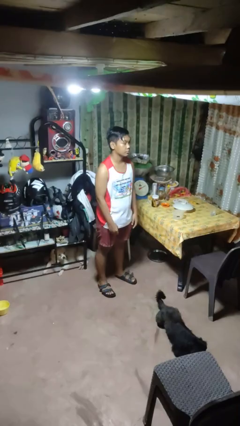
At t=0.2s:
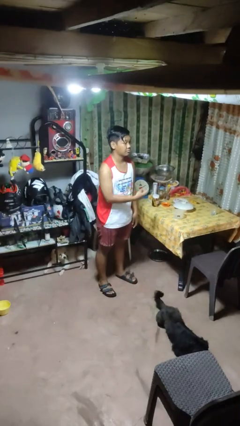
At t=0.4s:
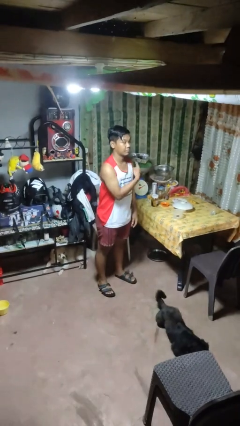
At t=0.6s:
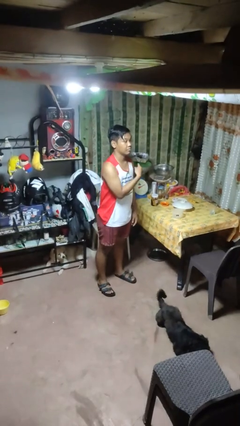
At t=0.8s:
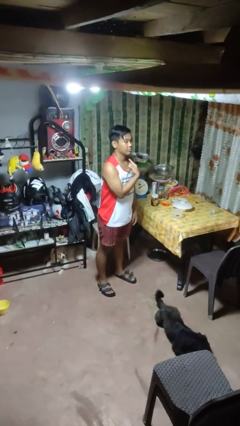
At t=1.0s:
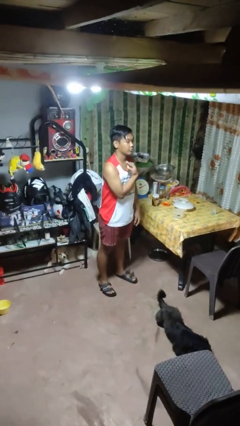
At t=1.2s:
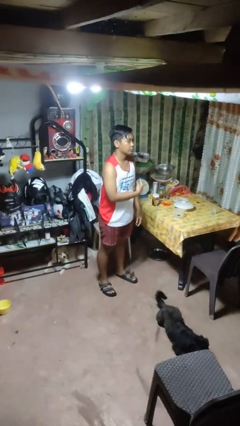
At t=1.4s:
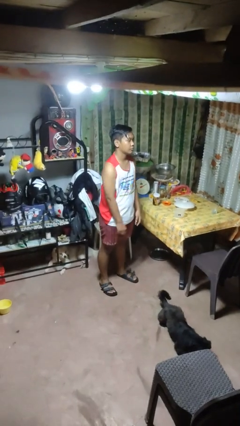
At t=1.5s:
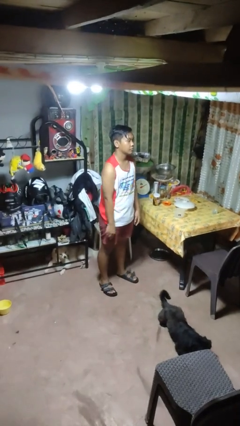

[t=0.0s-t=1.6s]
person gestures cut

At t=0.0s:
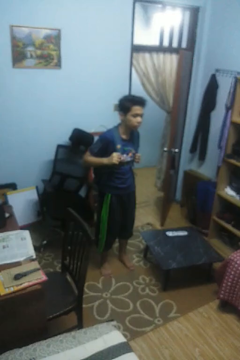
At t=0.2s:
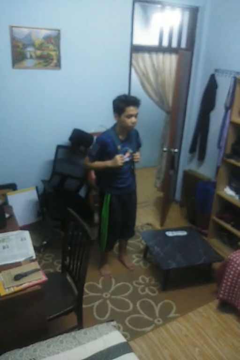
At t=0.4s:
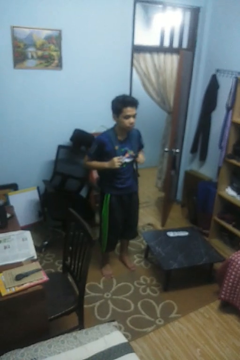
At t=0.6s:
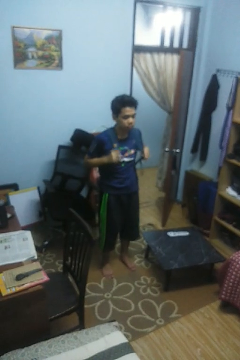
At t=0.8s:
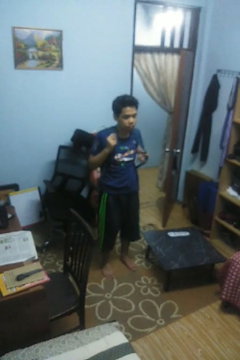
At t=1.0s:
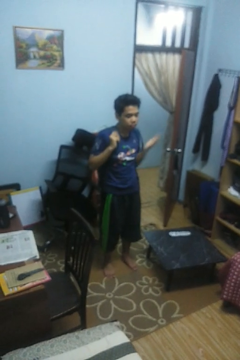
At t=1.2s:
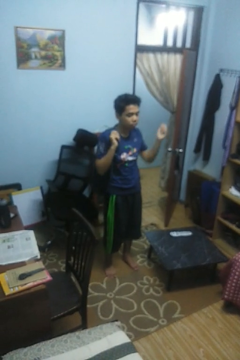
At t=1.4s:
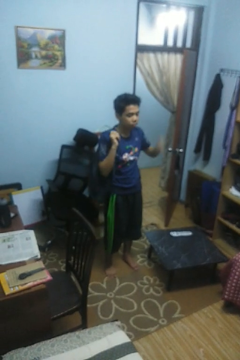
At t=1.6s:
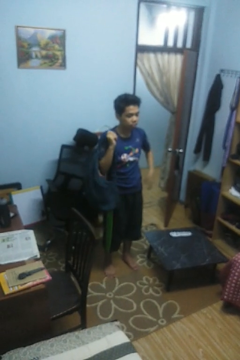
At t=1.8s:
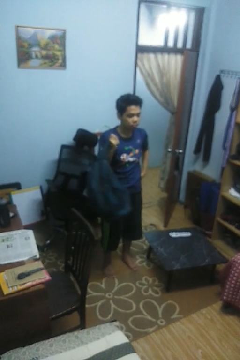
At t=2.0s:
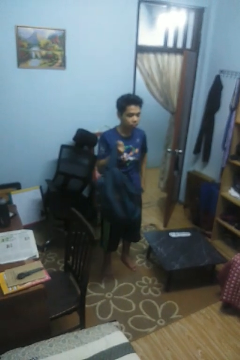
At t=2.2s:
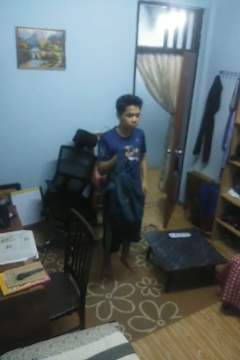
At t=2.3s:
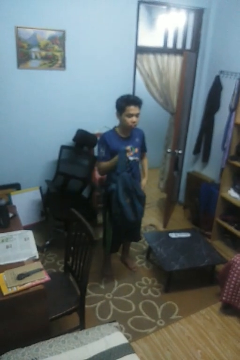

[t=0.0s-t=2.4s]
person takes off backpack

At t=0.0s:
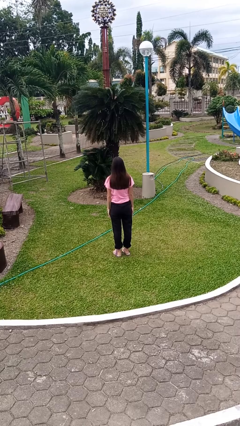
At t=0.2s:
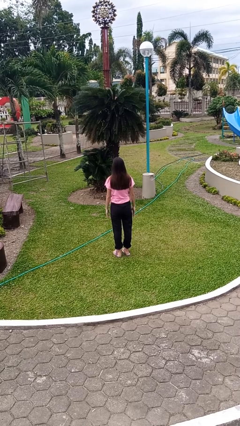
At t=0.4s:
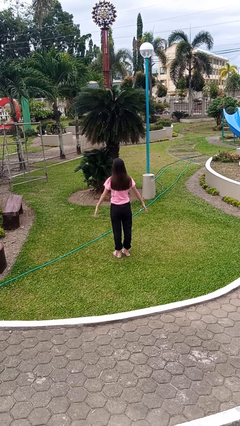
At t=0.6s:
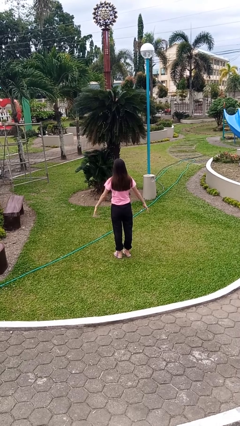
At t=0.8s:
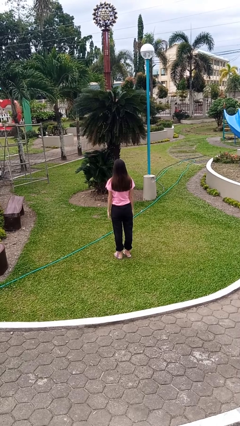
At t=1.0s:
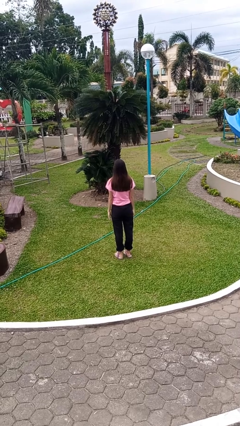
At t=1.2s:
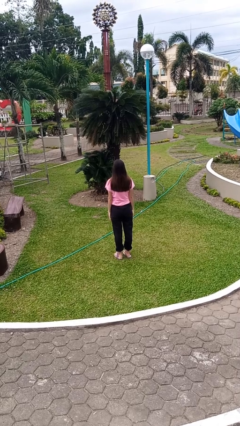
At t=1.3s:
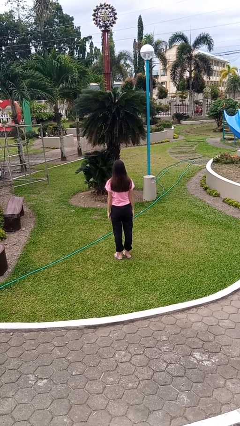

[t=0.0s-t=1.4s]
person slaps hands on thighs

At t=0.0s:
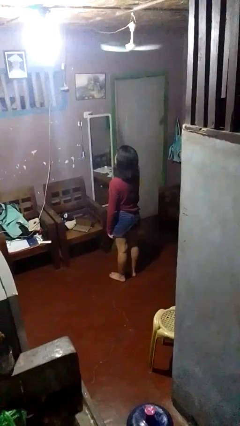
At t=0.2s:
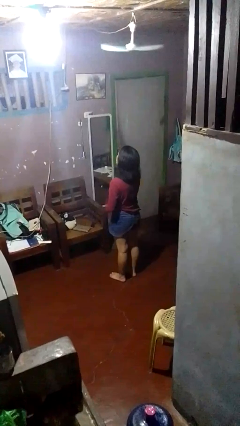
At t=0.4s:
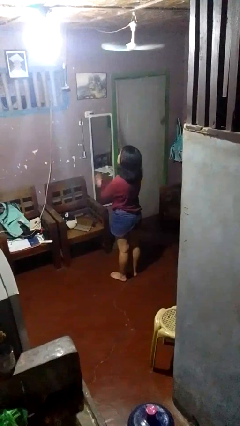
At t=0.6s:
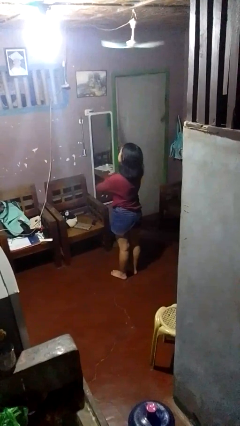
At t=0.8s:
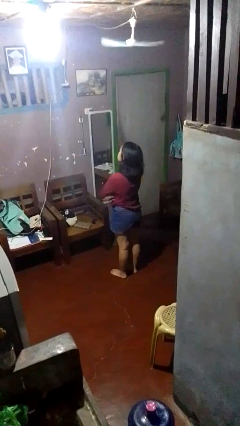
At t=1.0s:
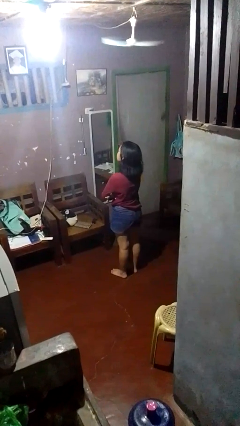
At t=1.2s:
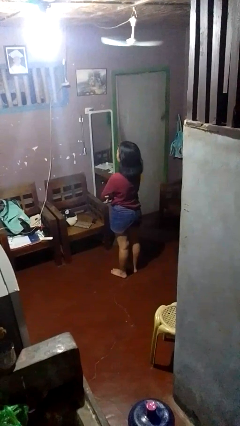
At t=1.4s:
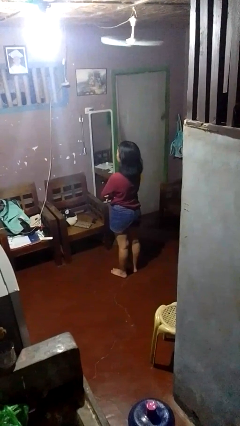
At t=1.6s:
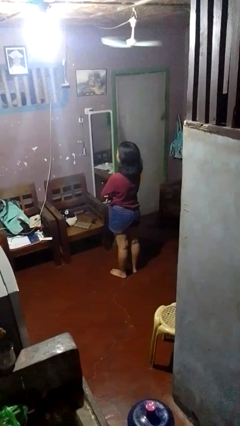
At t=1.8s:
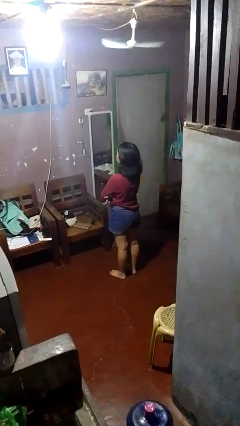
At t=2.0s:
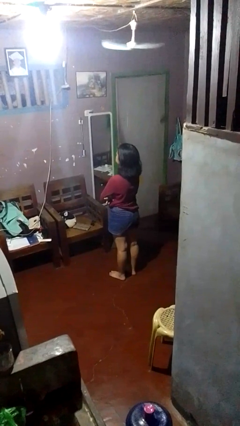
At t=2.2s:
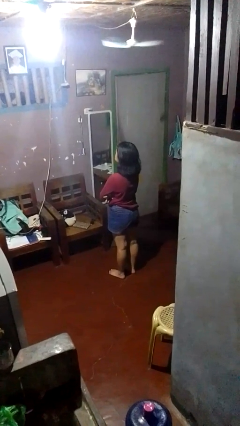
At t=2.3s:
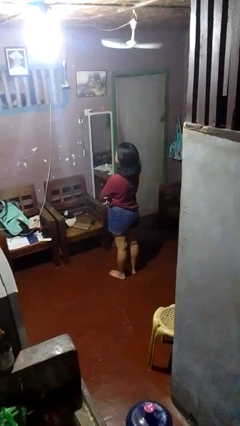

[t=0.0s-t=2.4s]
person crosses arms

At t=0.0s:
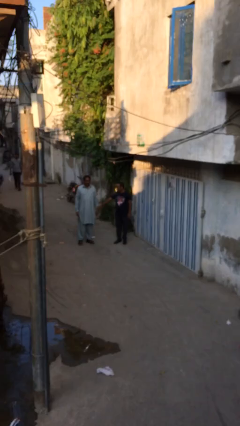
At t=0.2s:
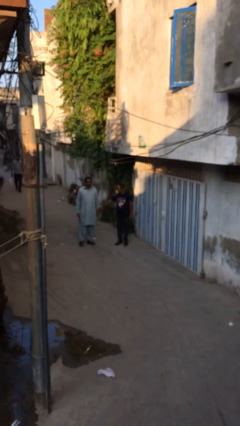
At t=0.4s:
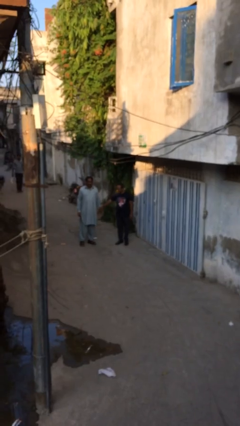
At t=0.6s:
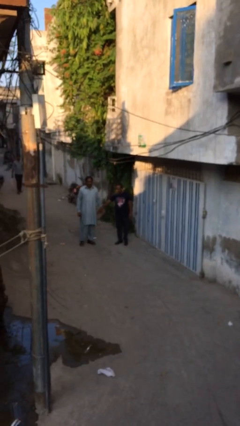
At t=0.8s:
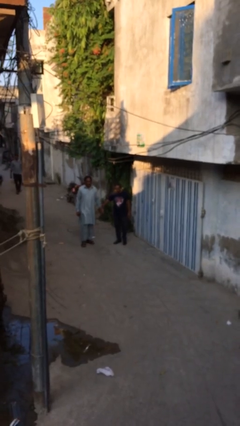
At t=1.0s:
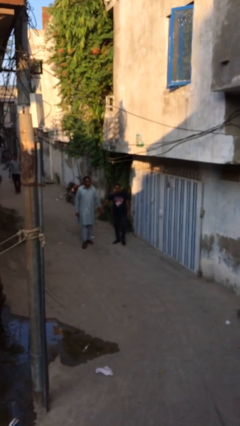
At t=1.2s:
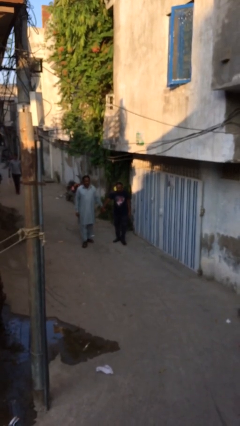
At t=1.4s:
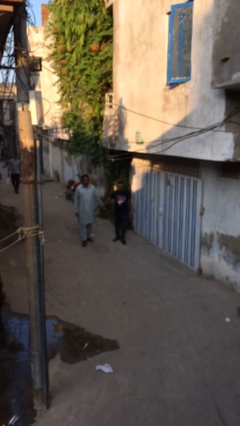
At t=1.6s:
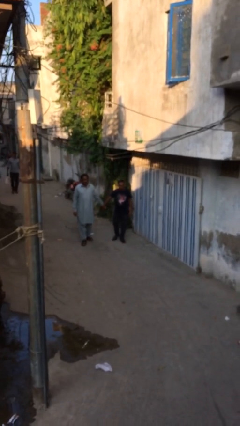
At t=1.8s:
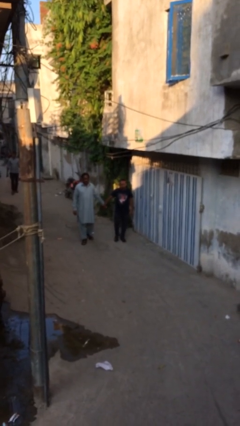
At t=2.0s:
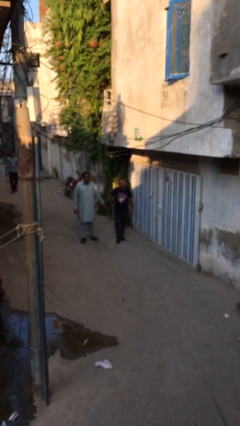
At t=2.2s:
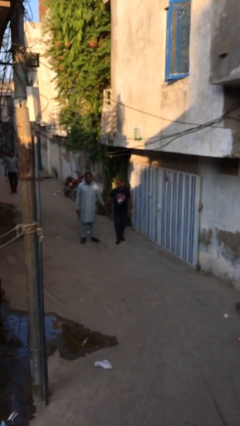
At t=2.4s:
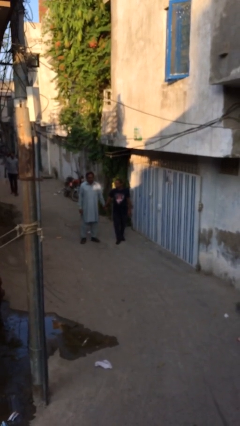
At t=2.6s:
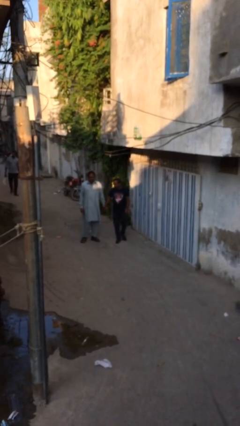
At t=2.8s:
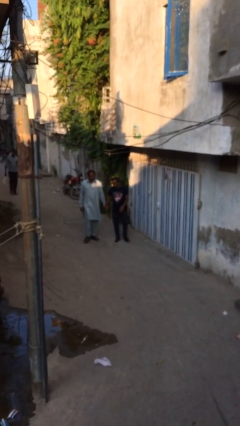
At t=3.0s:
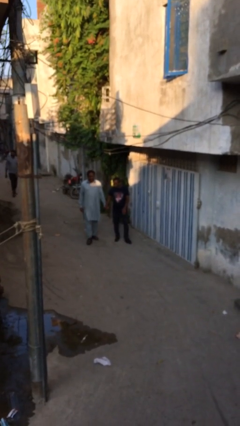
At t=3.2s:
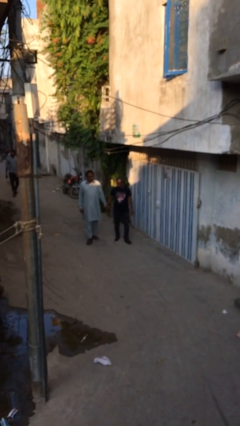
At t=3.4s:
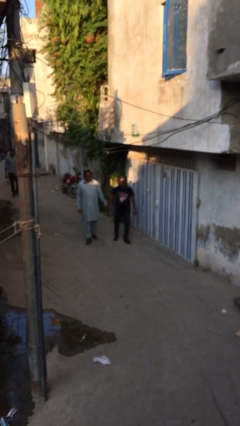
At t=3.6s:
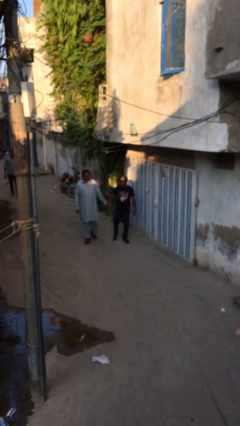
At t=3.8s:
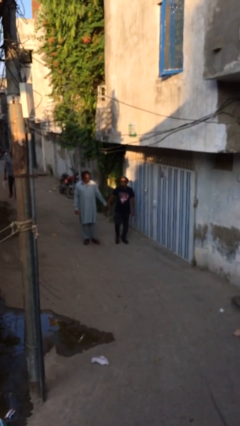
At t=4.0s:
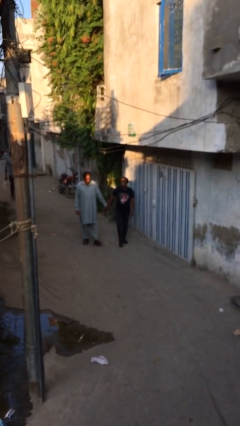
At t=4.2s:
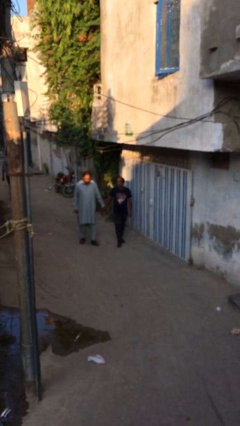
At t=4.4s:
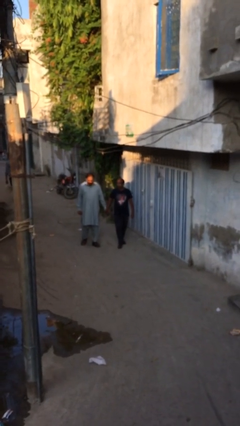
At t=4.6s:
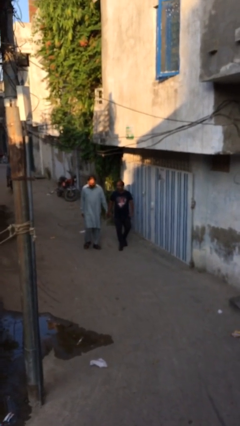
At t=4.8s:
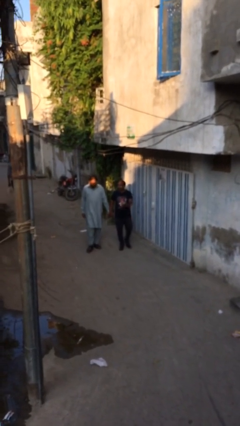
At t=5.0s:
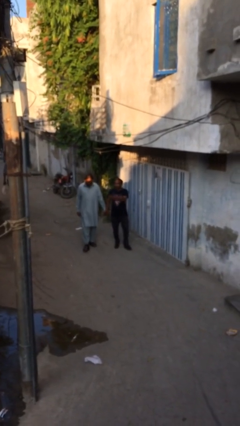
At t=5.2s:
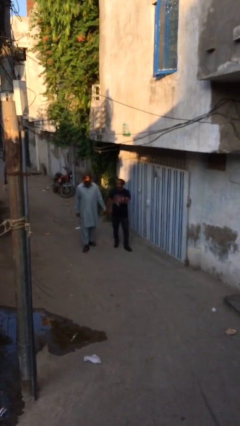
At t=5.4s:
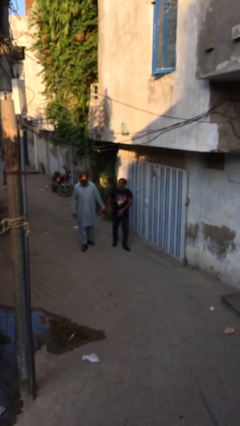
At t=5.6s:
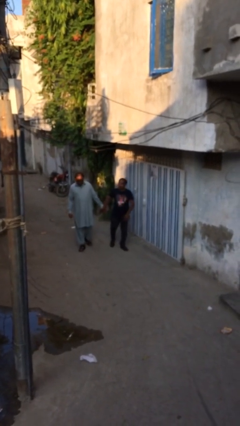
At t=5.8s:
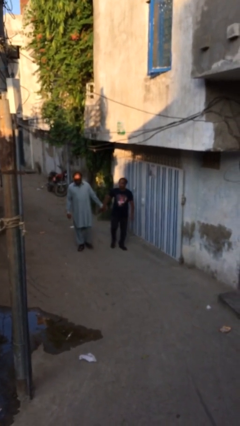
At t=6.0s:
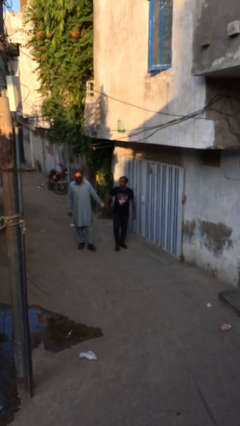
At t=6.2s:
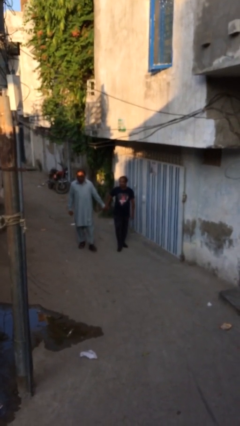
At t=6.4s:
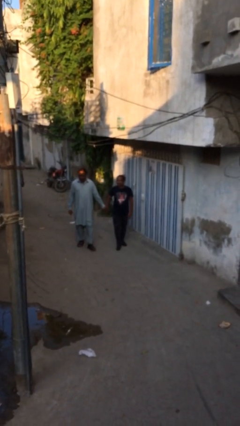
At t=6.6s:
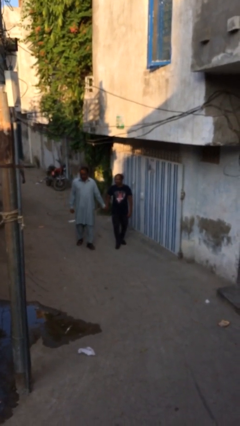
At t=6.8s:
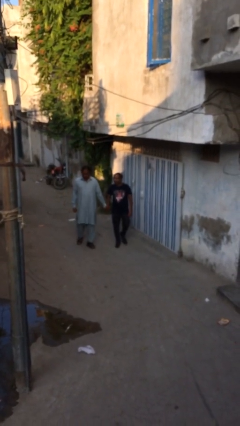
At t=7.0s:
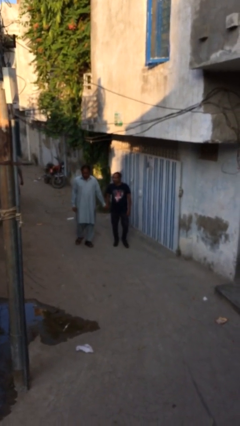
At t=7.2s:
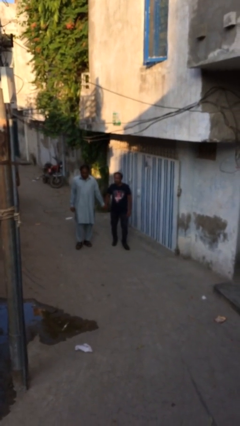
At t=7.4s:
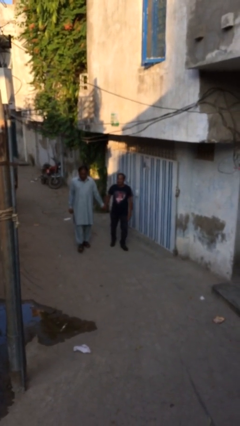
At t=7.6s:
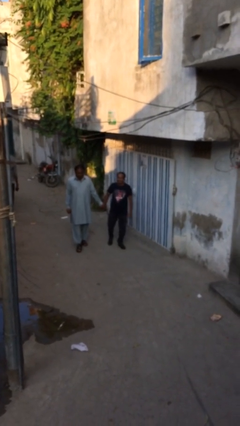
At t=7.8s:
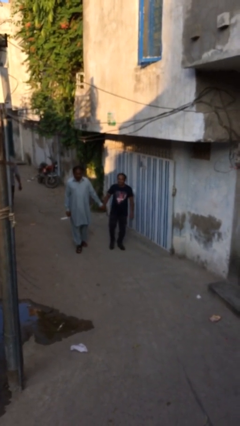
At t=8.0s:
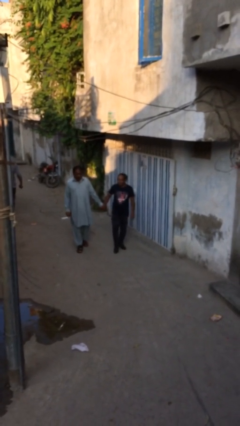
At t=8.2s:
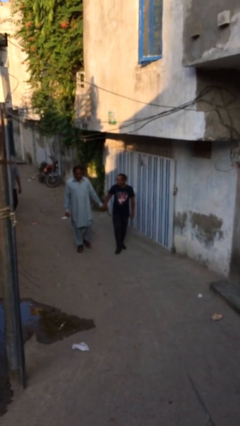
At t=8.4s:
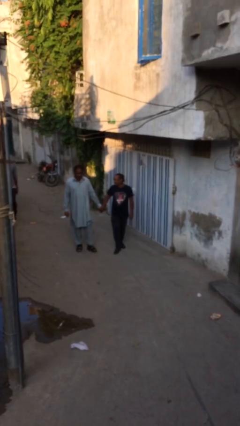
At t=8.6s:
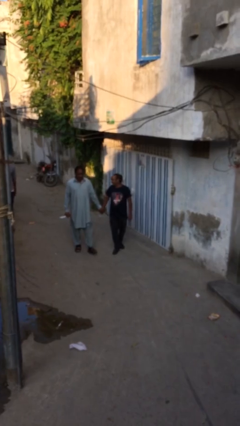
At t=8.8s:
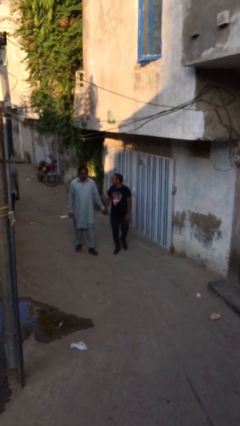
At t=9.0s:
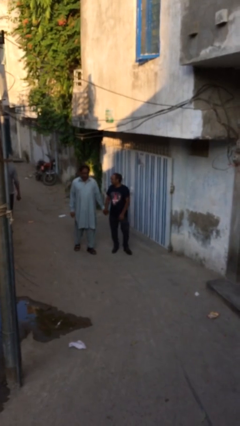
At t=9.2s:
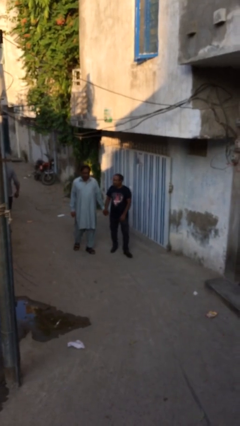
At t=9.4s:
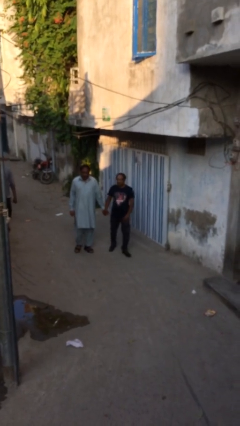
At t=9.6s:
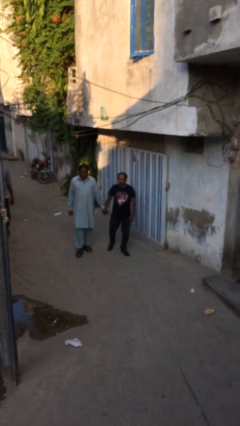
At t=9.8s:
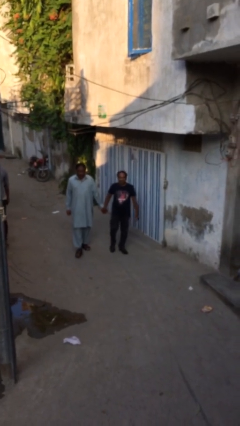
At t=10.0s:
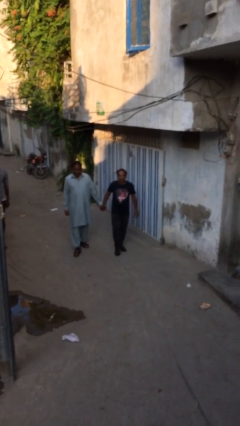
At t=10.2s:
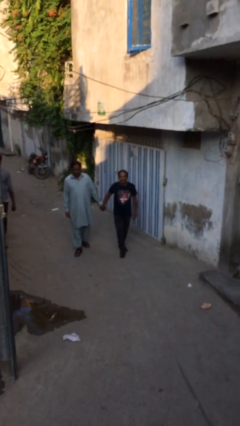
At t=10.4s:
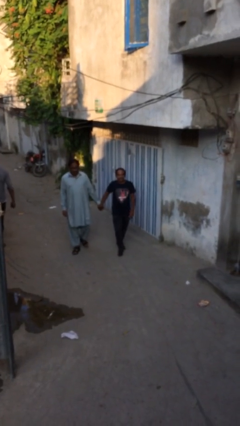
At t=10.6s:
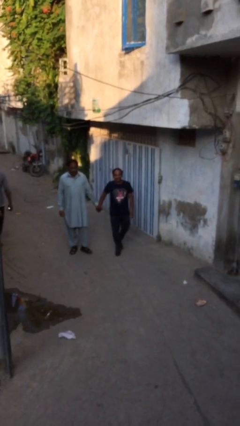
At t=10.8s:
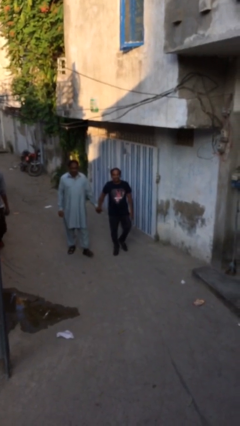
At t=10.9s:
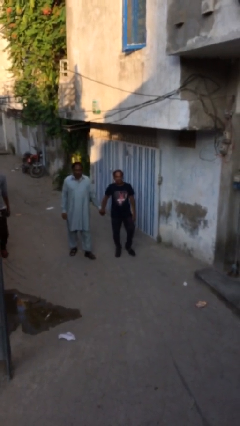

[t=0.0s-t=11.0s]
person holds hand
